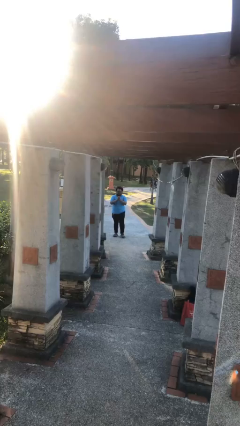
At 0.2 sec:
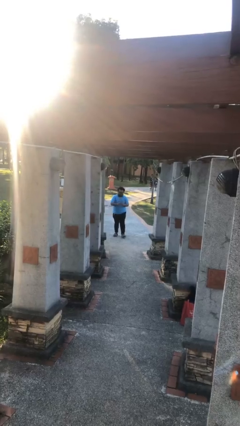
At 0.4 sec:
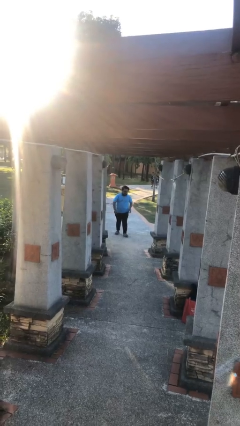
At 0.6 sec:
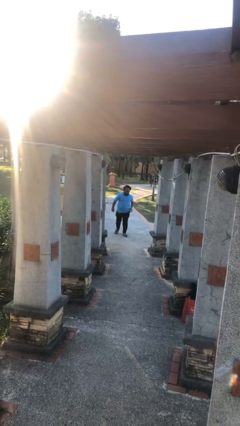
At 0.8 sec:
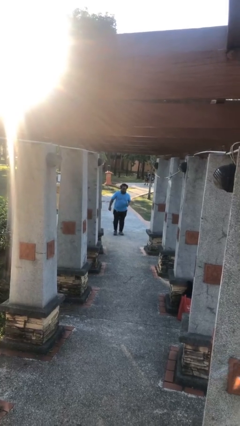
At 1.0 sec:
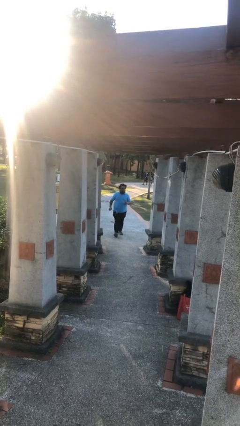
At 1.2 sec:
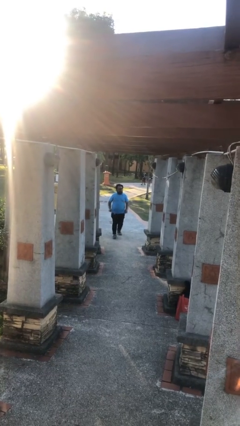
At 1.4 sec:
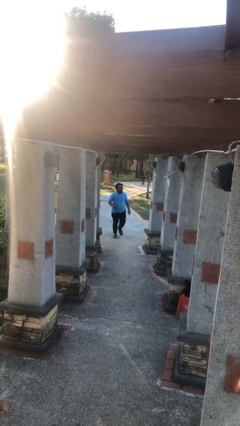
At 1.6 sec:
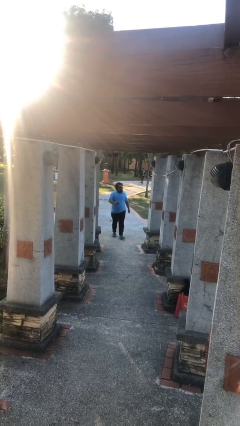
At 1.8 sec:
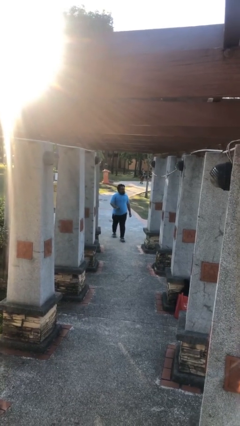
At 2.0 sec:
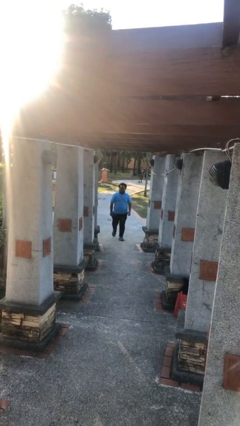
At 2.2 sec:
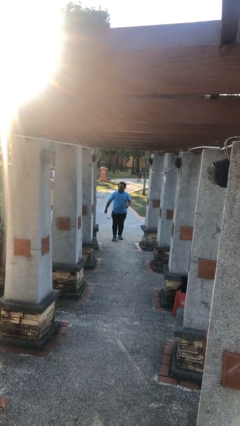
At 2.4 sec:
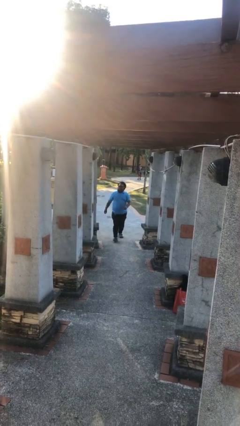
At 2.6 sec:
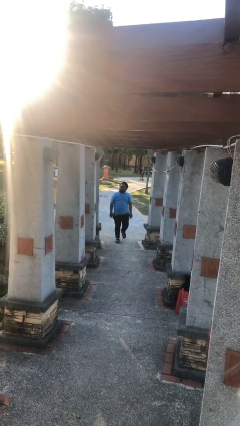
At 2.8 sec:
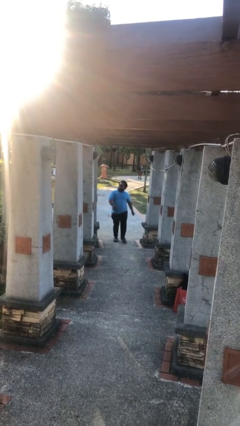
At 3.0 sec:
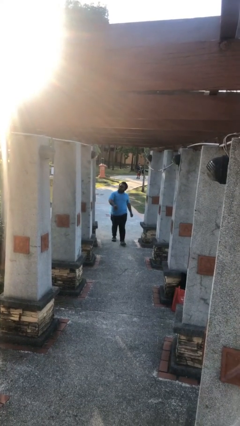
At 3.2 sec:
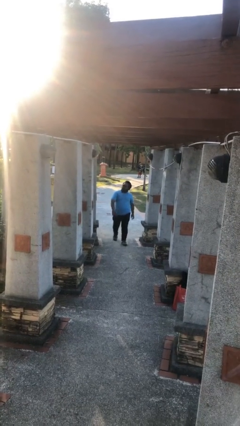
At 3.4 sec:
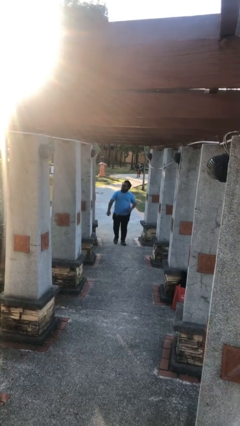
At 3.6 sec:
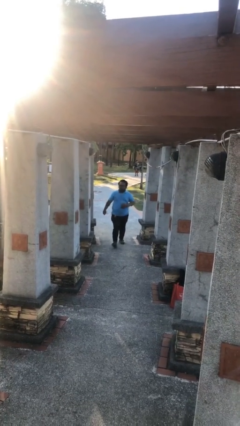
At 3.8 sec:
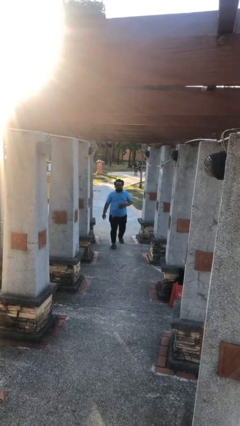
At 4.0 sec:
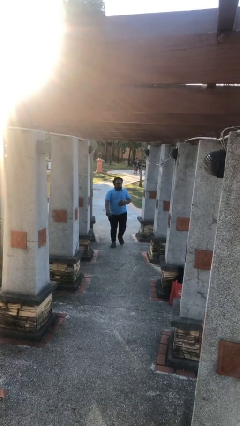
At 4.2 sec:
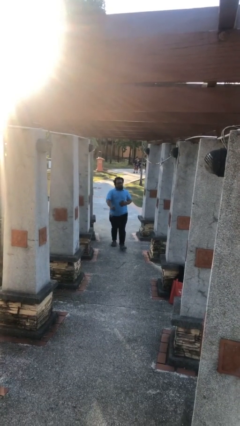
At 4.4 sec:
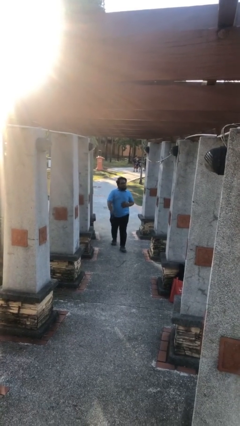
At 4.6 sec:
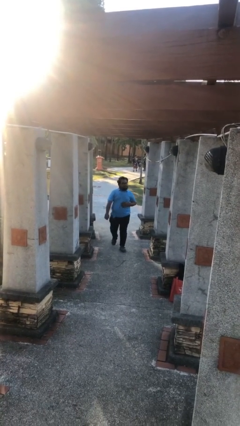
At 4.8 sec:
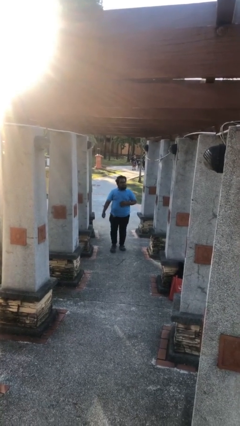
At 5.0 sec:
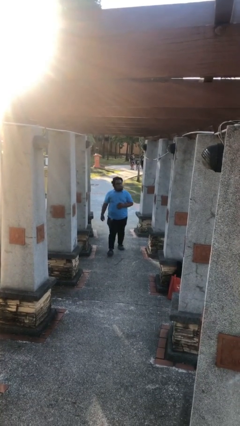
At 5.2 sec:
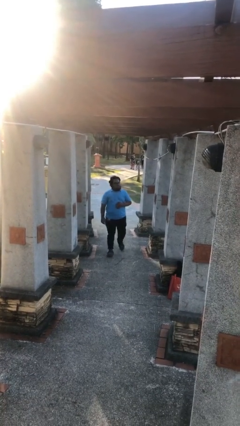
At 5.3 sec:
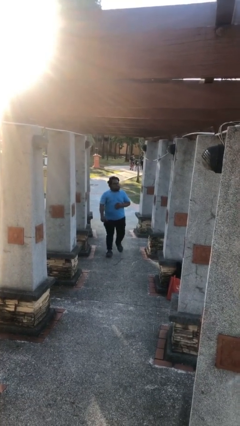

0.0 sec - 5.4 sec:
person enters scene through structure

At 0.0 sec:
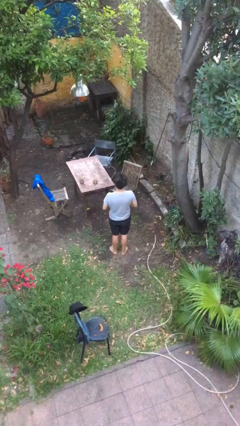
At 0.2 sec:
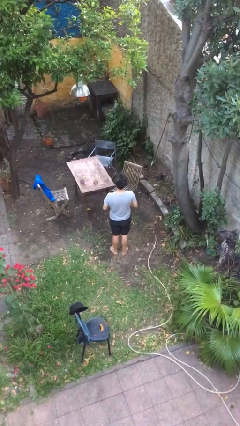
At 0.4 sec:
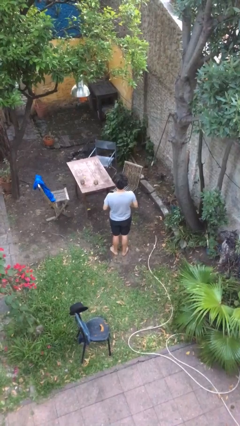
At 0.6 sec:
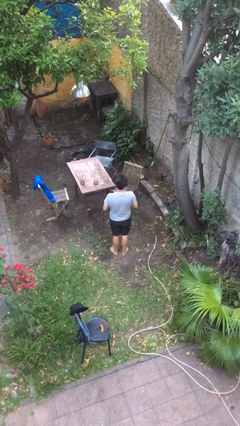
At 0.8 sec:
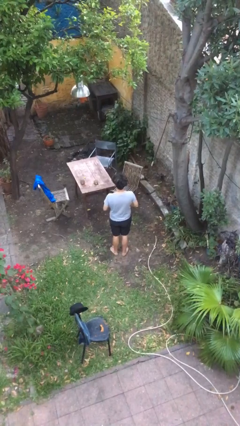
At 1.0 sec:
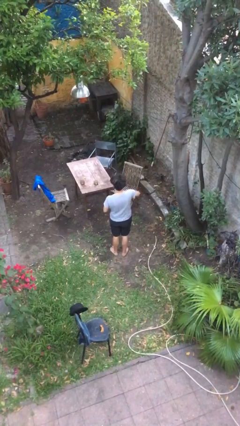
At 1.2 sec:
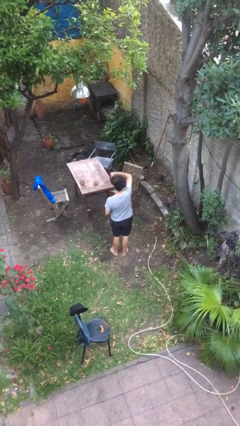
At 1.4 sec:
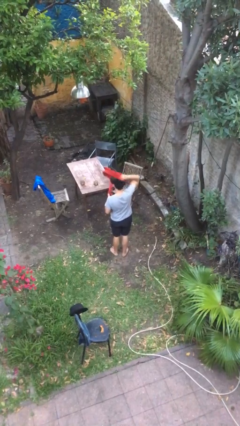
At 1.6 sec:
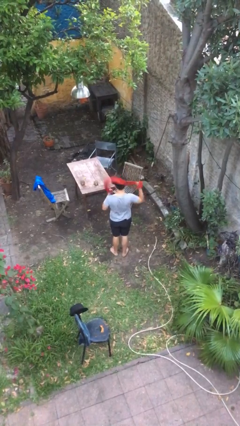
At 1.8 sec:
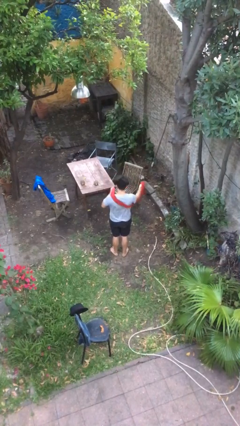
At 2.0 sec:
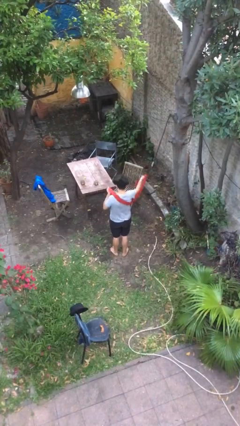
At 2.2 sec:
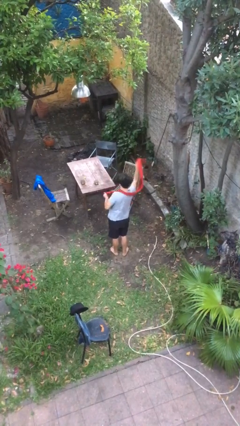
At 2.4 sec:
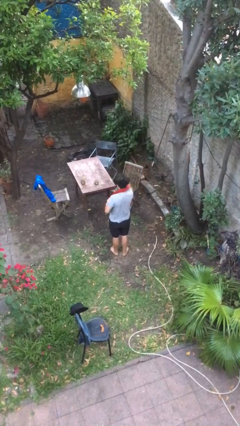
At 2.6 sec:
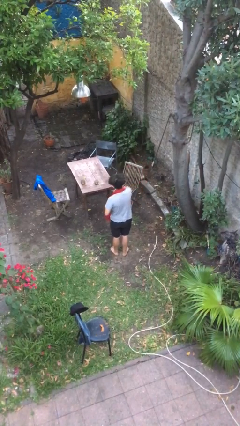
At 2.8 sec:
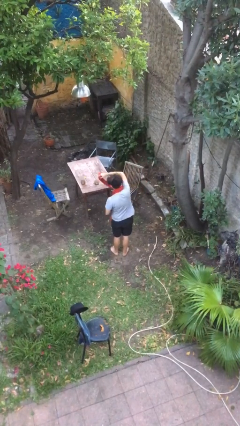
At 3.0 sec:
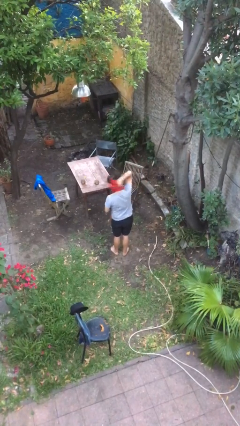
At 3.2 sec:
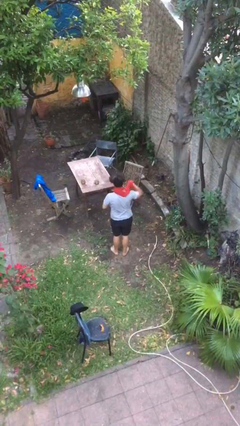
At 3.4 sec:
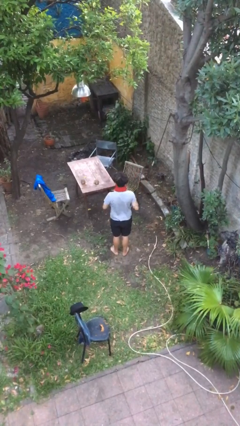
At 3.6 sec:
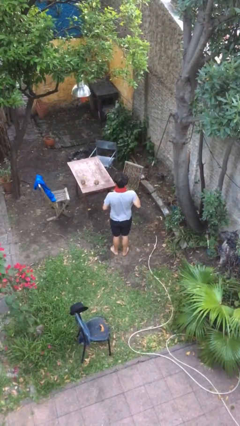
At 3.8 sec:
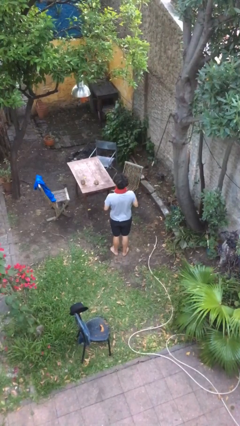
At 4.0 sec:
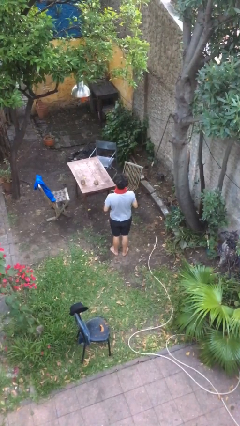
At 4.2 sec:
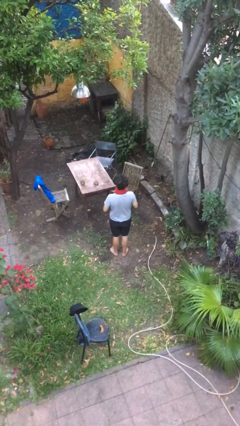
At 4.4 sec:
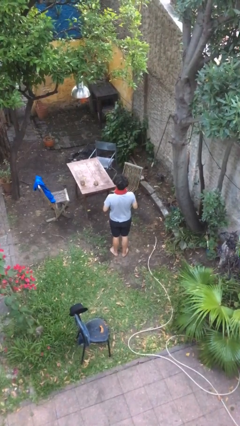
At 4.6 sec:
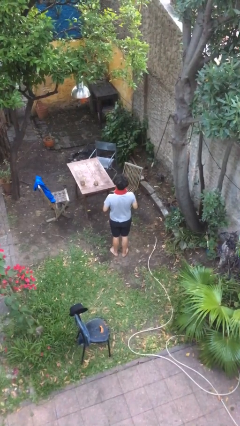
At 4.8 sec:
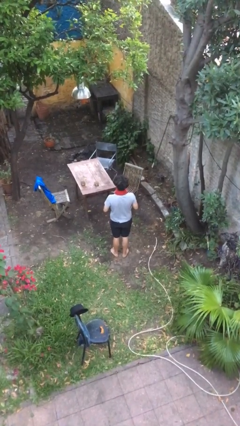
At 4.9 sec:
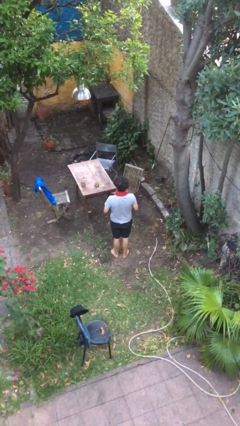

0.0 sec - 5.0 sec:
person puts on scarf

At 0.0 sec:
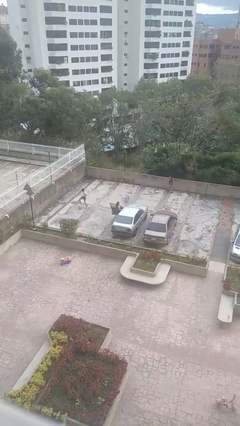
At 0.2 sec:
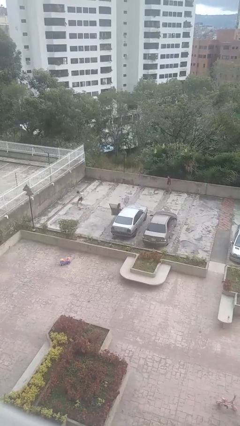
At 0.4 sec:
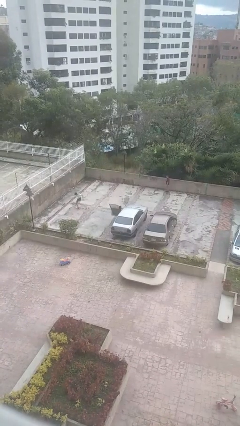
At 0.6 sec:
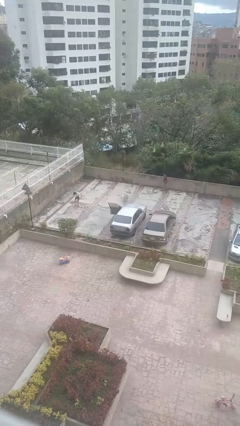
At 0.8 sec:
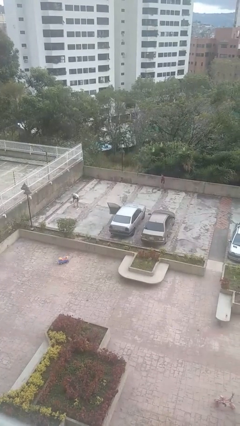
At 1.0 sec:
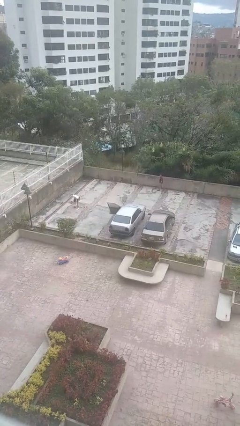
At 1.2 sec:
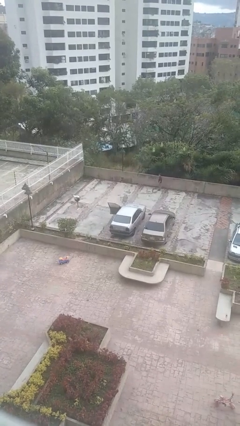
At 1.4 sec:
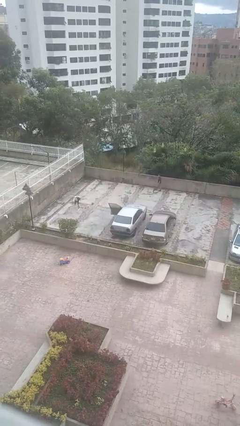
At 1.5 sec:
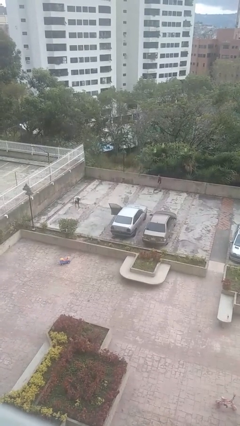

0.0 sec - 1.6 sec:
person enters car

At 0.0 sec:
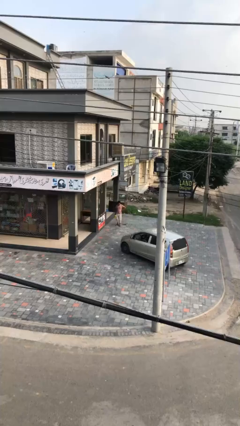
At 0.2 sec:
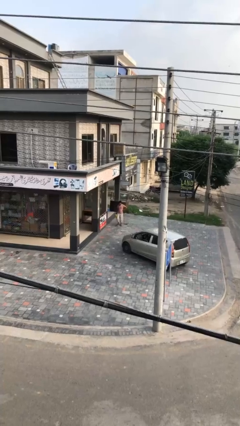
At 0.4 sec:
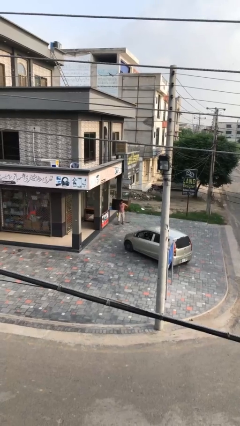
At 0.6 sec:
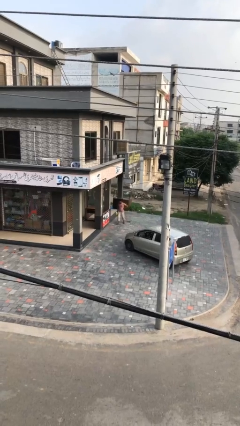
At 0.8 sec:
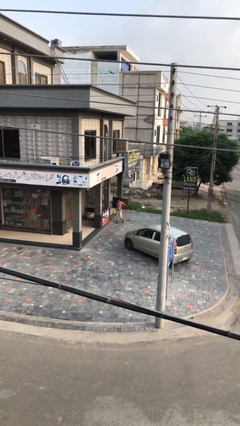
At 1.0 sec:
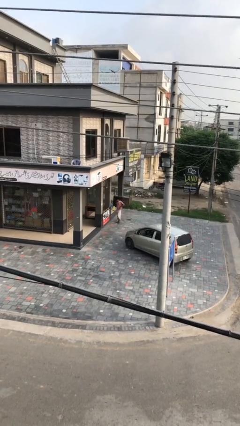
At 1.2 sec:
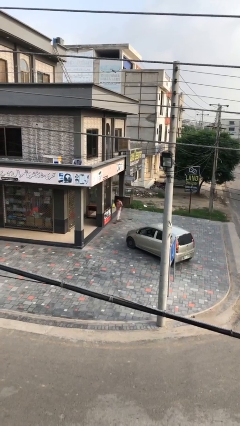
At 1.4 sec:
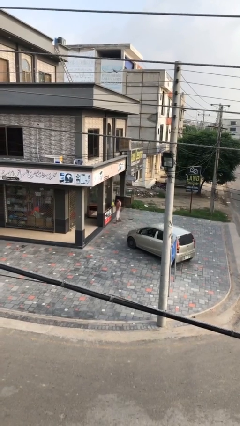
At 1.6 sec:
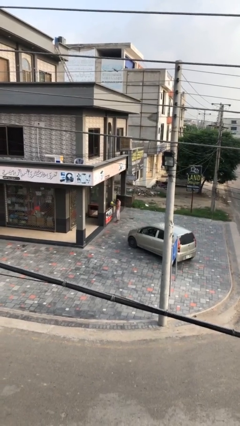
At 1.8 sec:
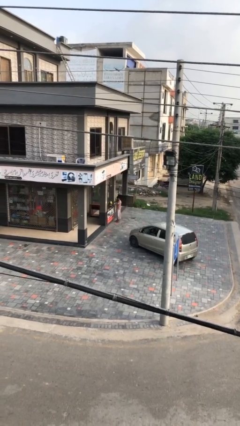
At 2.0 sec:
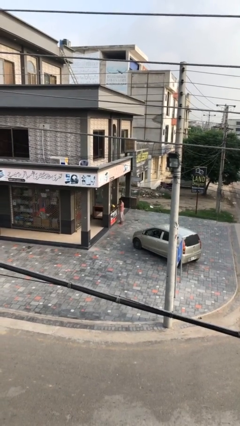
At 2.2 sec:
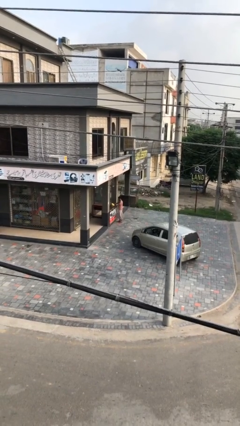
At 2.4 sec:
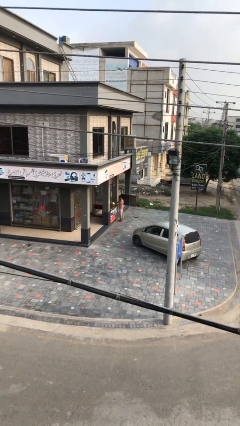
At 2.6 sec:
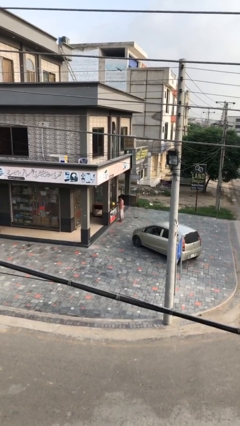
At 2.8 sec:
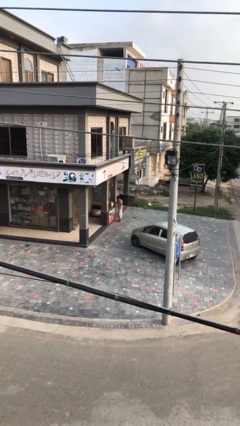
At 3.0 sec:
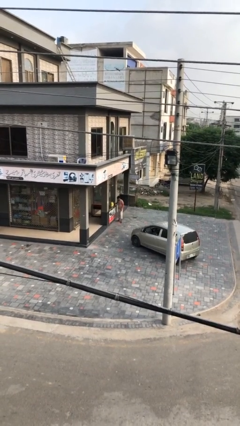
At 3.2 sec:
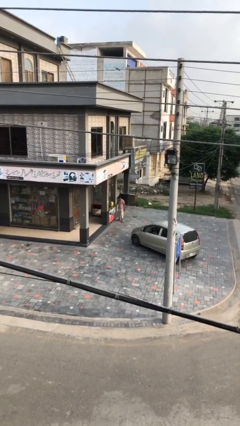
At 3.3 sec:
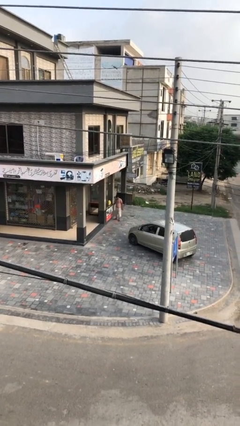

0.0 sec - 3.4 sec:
person puts down object on table

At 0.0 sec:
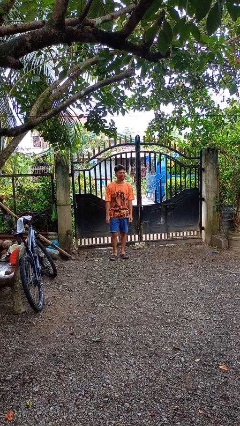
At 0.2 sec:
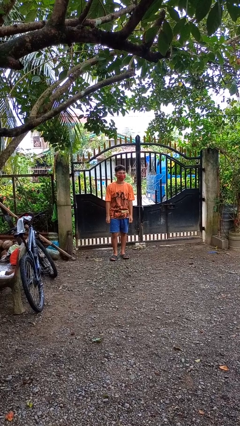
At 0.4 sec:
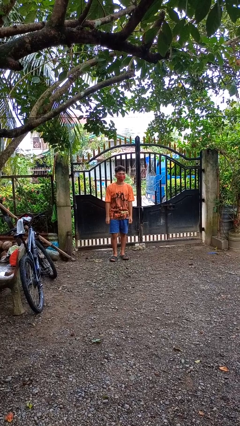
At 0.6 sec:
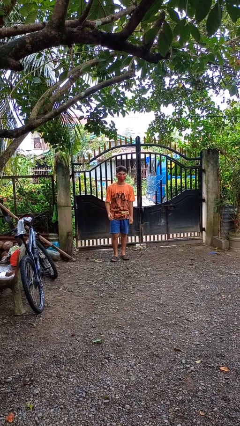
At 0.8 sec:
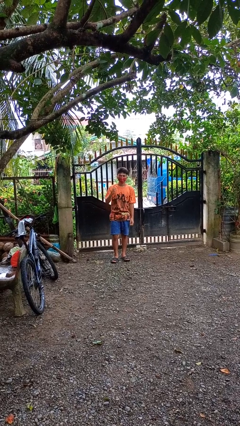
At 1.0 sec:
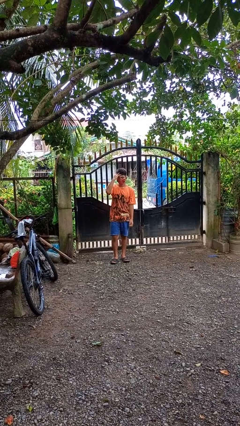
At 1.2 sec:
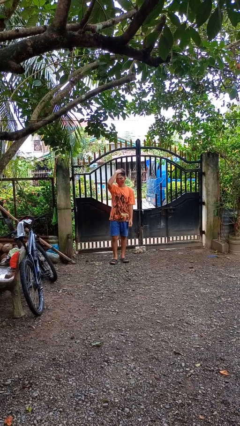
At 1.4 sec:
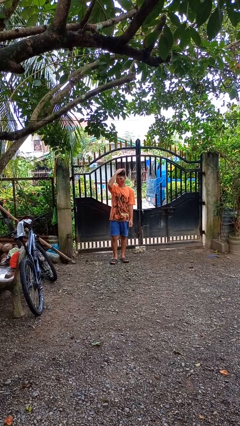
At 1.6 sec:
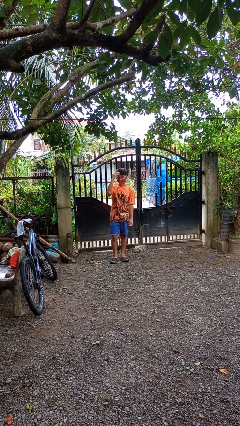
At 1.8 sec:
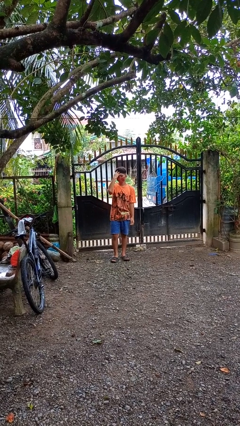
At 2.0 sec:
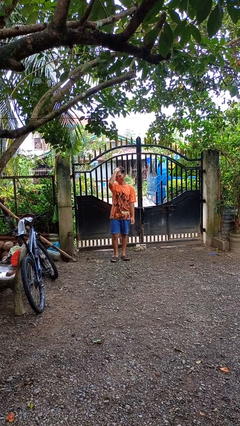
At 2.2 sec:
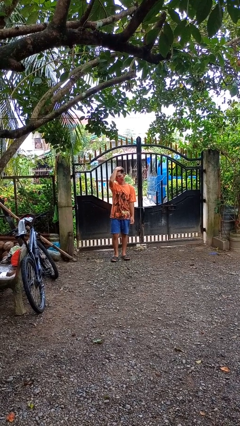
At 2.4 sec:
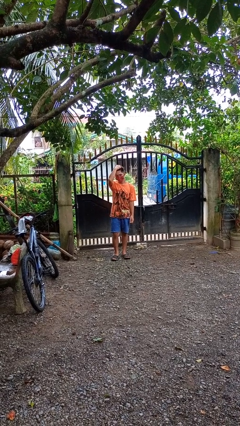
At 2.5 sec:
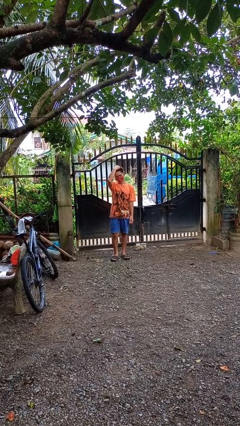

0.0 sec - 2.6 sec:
person strokes hair
